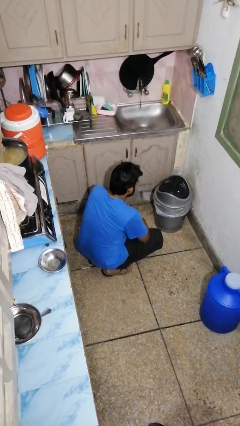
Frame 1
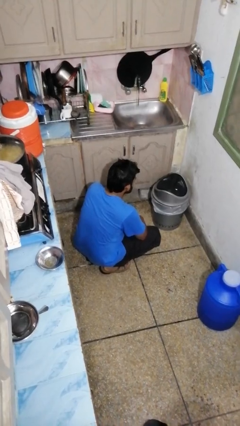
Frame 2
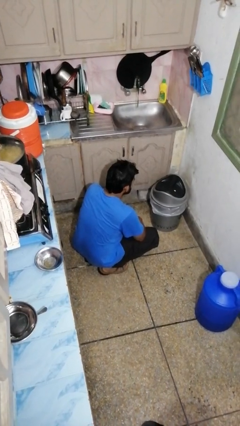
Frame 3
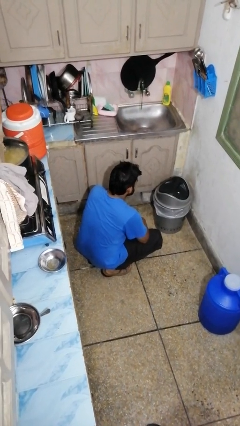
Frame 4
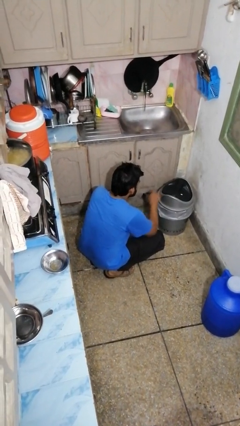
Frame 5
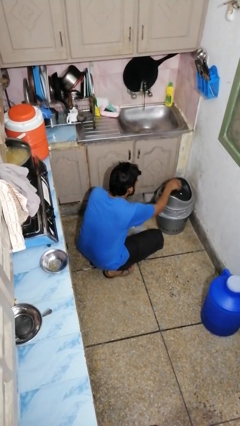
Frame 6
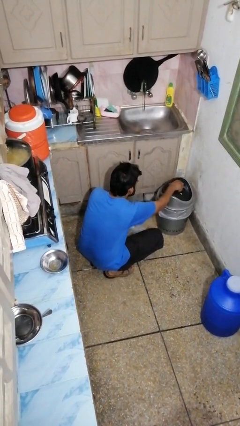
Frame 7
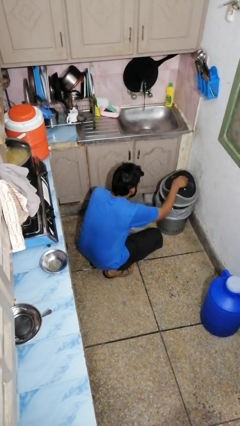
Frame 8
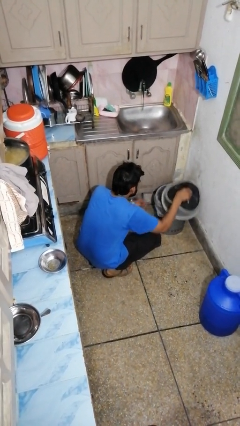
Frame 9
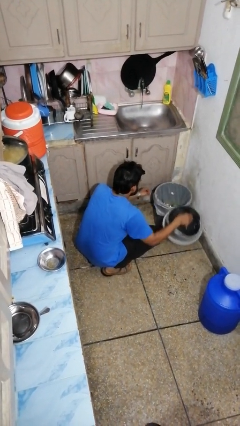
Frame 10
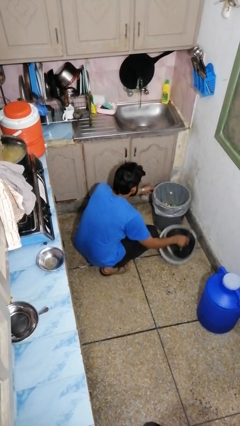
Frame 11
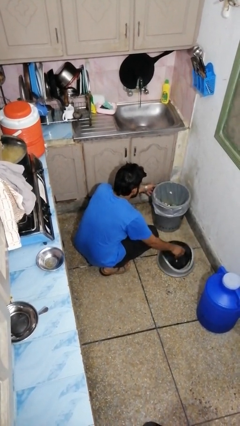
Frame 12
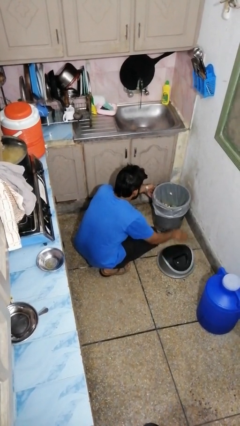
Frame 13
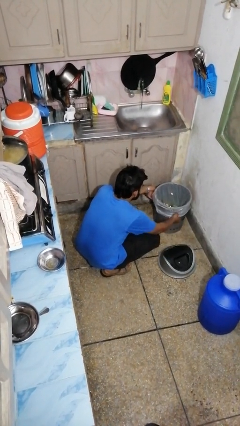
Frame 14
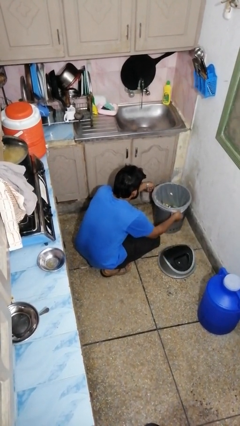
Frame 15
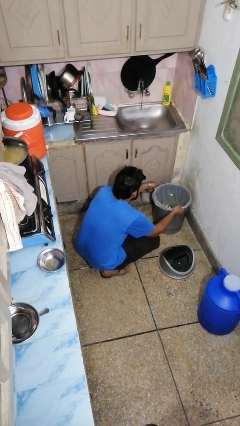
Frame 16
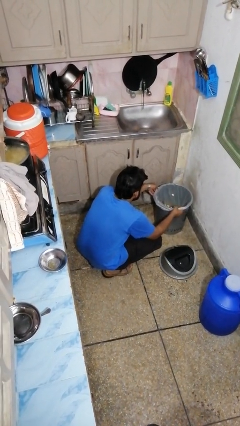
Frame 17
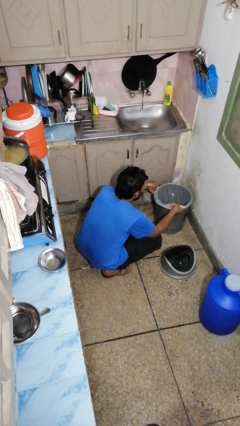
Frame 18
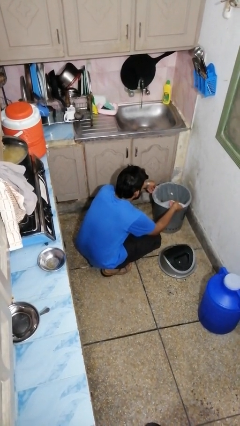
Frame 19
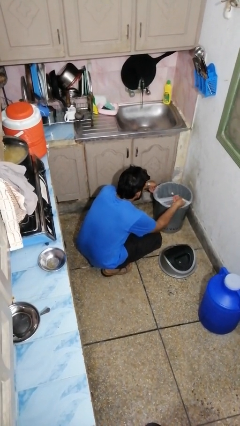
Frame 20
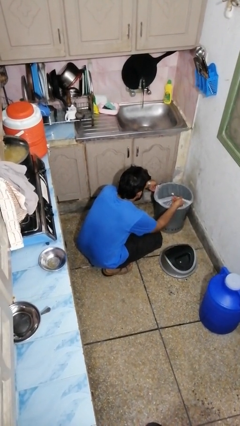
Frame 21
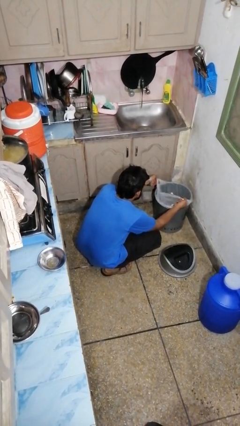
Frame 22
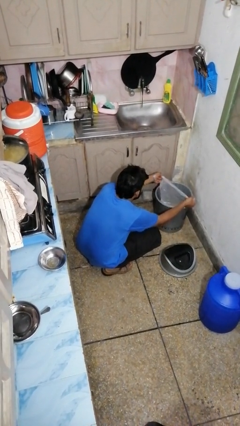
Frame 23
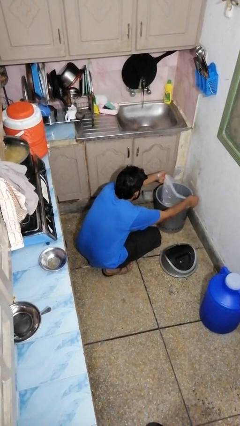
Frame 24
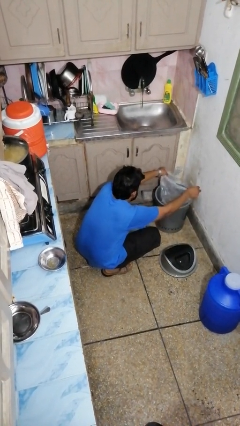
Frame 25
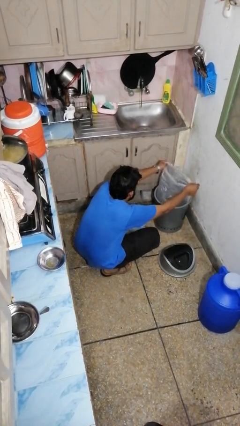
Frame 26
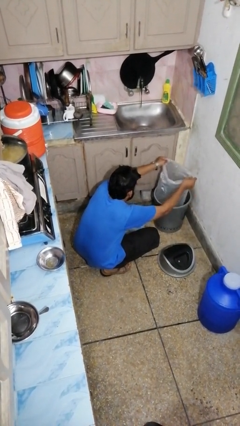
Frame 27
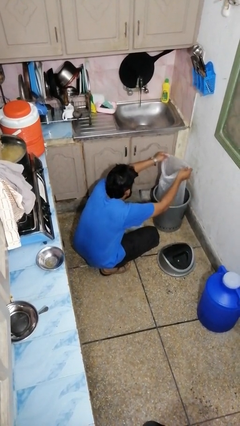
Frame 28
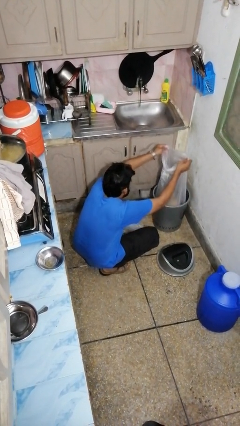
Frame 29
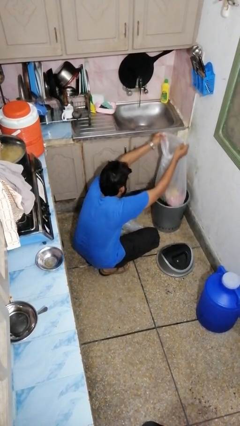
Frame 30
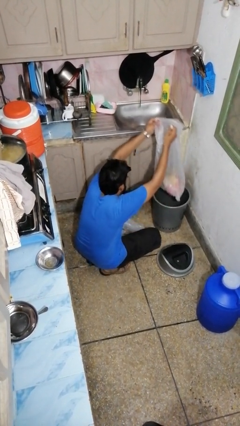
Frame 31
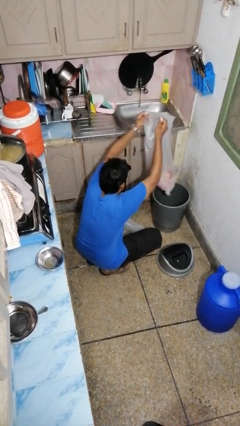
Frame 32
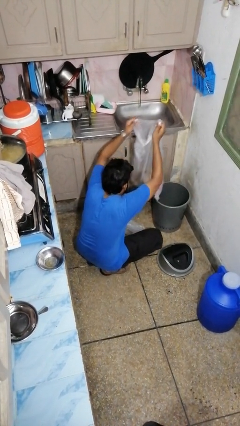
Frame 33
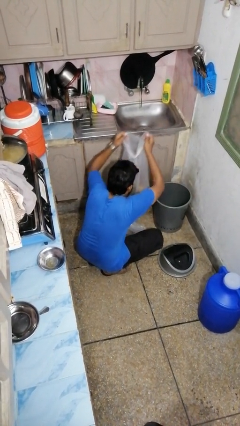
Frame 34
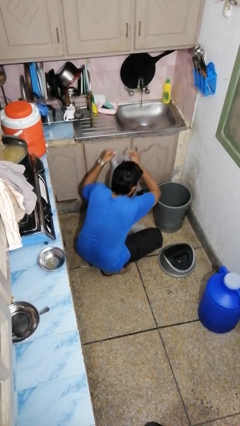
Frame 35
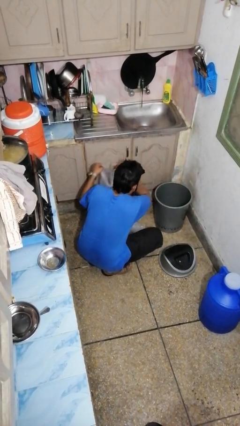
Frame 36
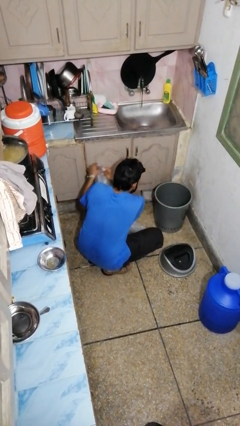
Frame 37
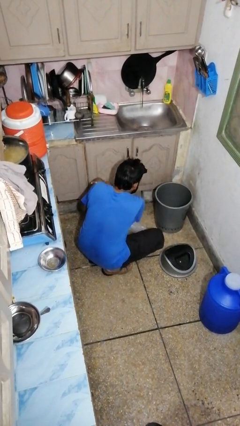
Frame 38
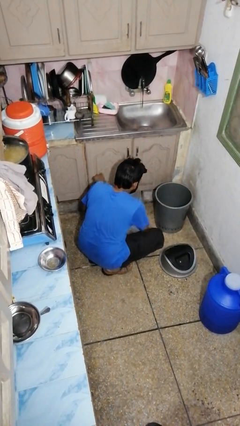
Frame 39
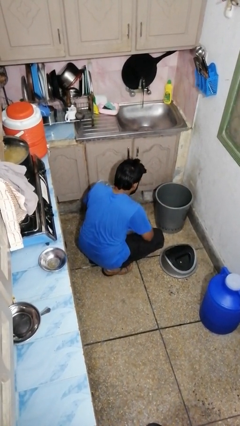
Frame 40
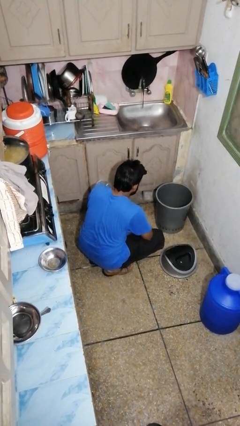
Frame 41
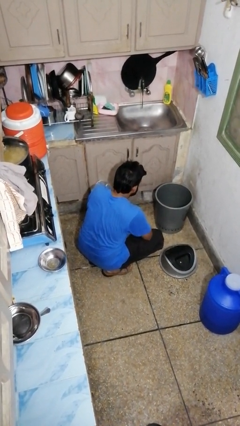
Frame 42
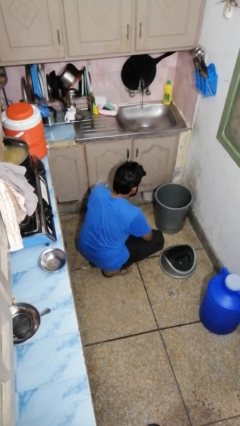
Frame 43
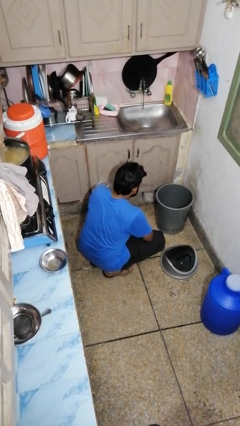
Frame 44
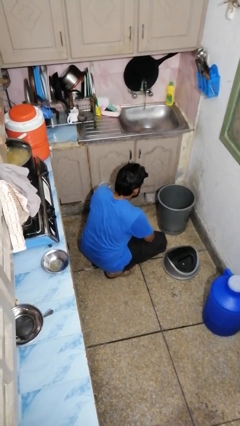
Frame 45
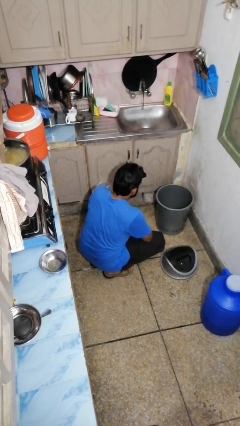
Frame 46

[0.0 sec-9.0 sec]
person removes trashbag from trashcan

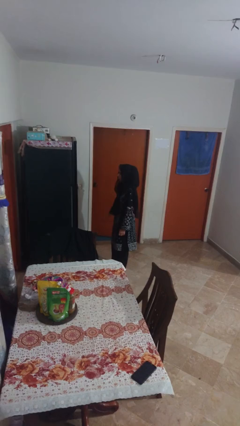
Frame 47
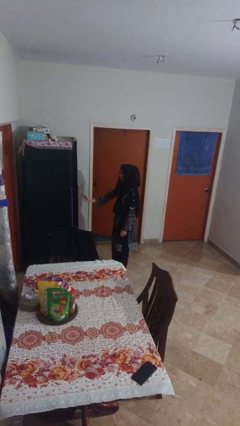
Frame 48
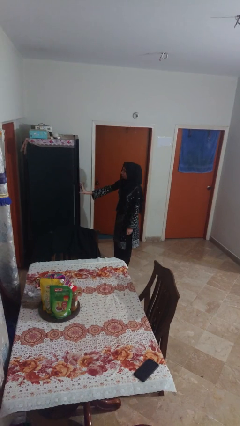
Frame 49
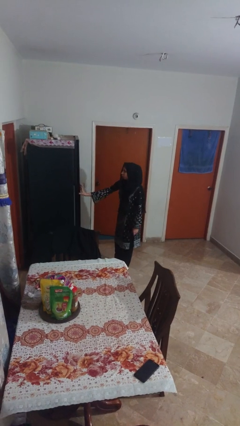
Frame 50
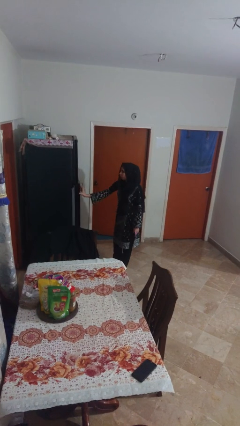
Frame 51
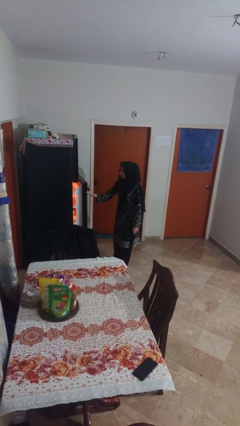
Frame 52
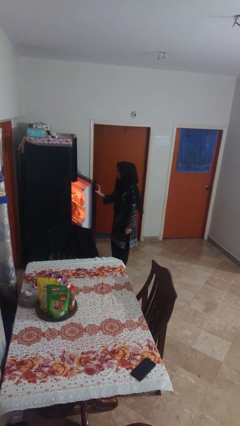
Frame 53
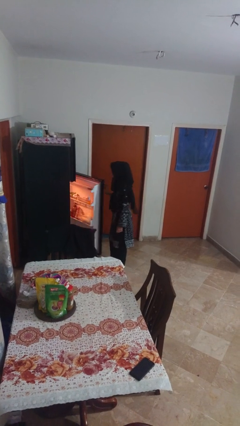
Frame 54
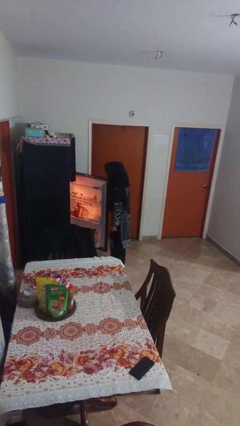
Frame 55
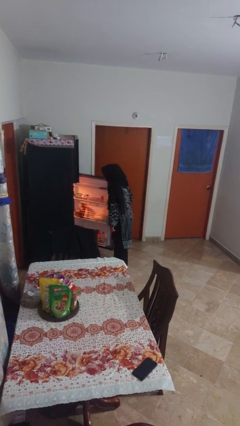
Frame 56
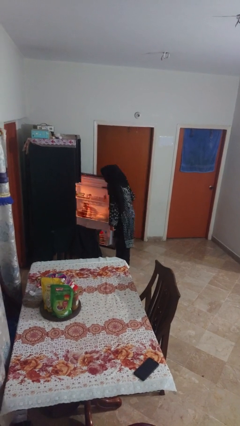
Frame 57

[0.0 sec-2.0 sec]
person opens refrigerator

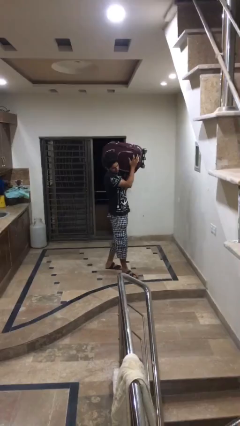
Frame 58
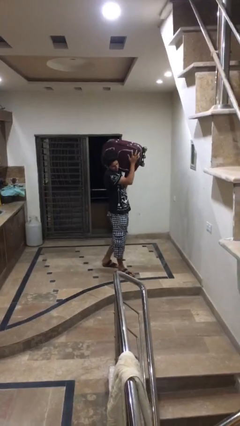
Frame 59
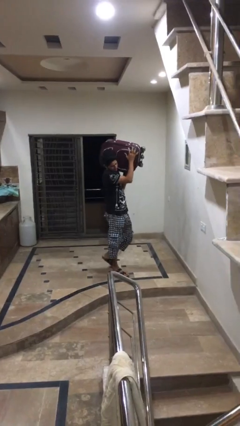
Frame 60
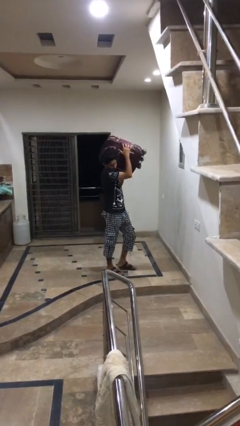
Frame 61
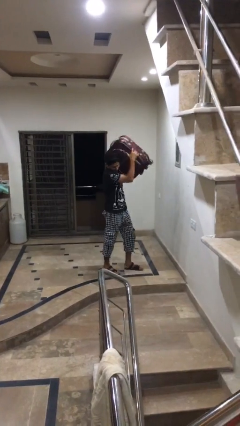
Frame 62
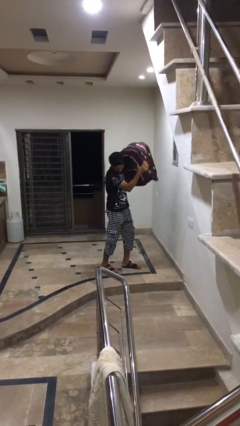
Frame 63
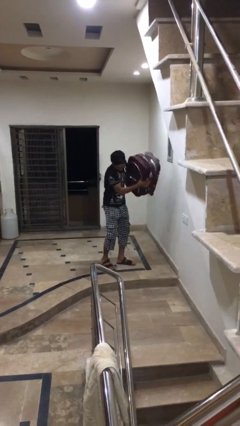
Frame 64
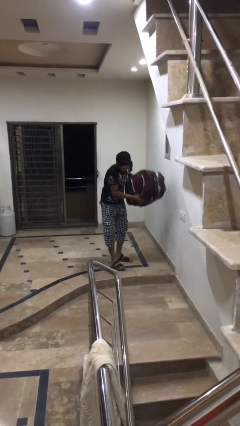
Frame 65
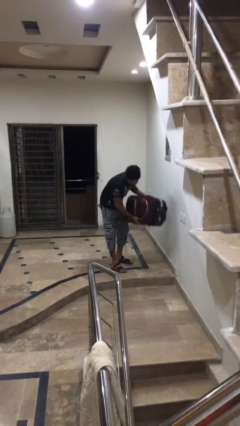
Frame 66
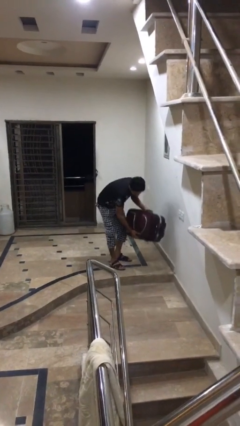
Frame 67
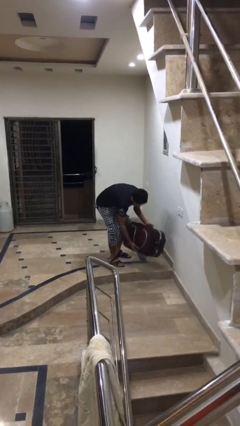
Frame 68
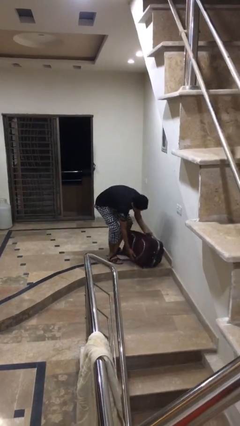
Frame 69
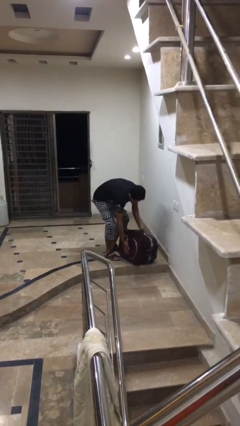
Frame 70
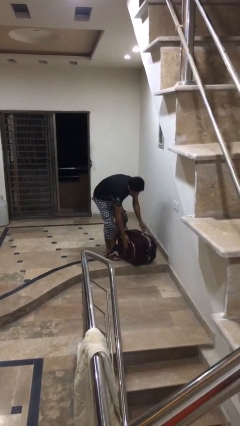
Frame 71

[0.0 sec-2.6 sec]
person puts down object on floor

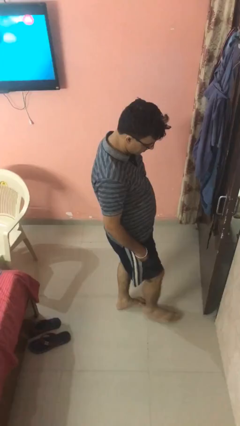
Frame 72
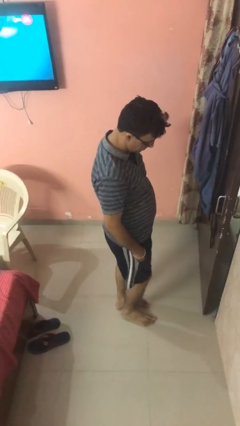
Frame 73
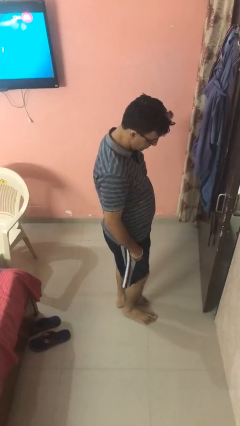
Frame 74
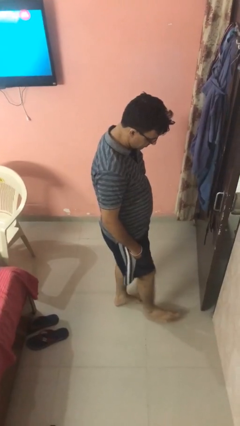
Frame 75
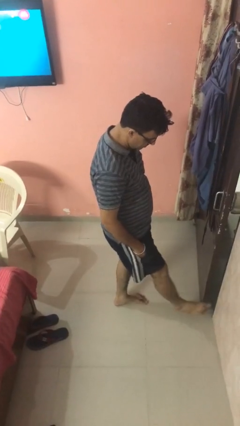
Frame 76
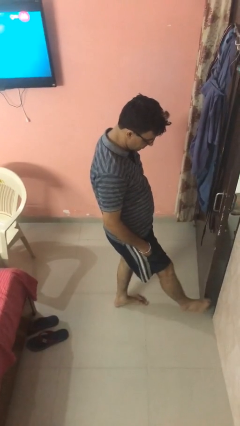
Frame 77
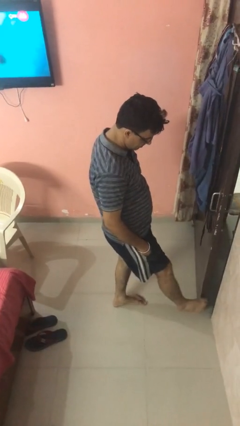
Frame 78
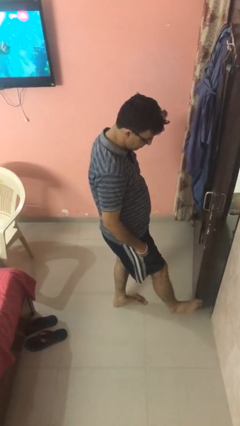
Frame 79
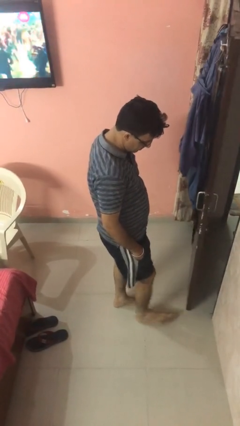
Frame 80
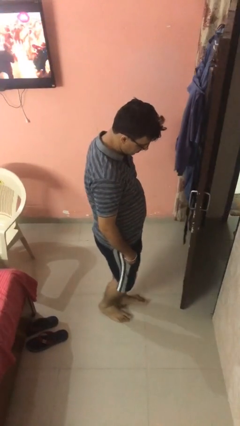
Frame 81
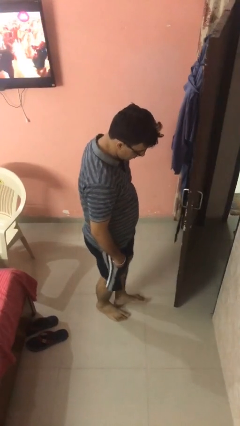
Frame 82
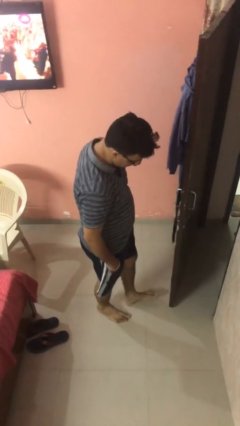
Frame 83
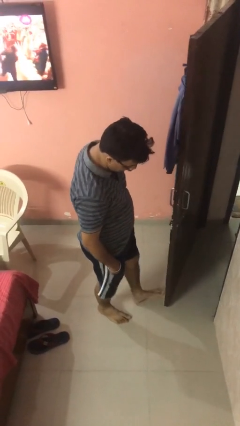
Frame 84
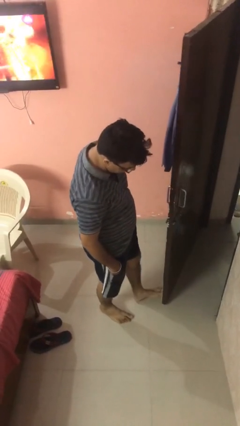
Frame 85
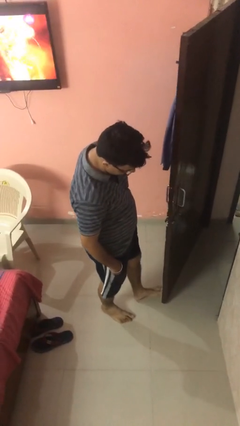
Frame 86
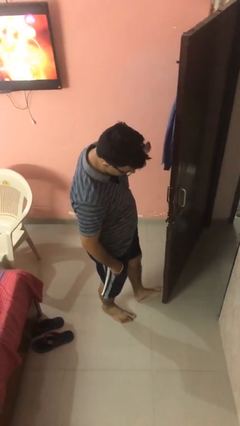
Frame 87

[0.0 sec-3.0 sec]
person opens facility door
